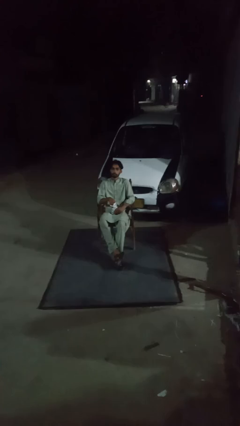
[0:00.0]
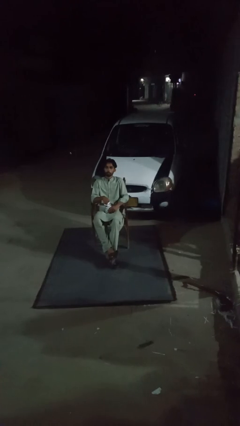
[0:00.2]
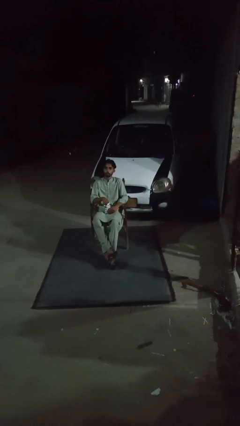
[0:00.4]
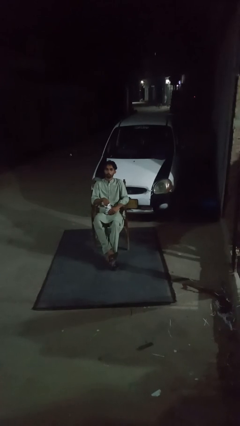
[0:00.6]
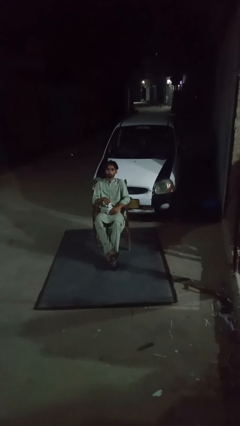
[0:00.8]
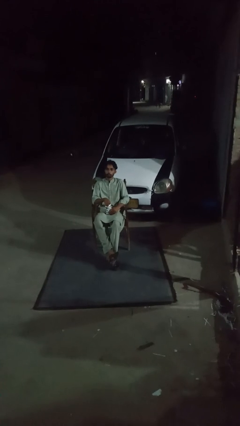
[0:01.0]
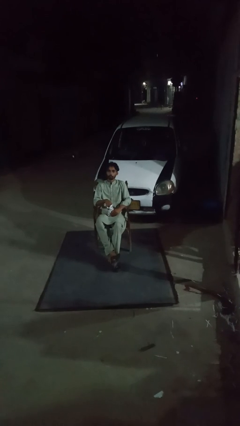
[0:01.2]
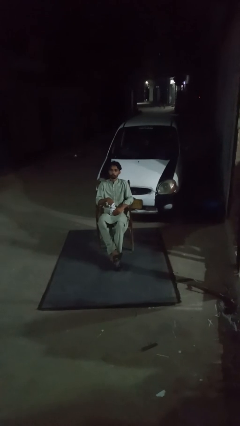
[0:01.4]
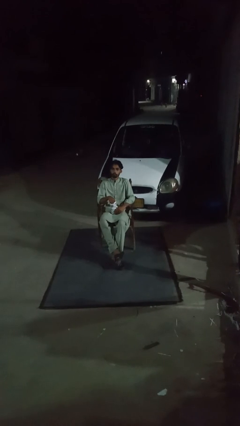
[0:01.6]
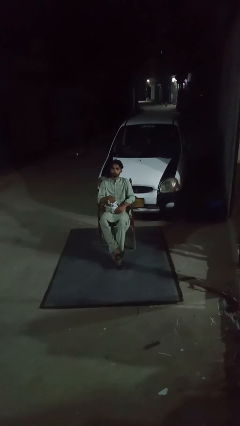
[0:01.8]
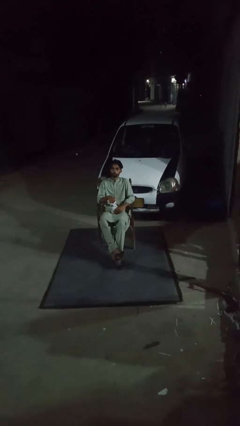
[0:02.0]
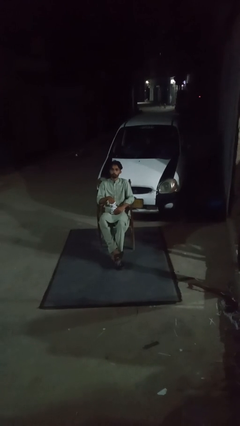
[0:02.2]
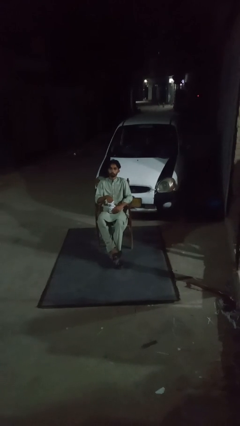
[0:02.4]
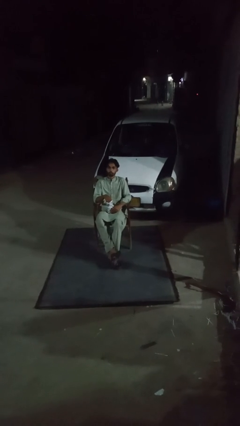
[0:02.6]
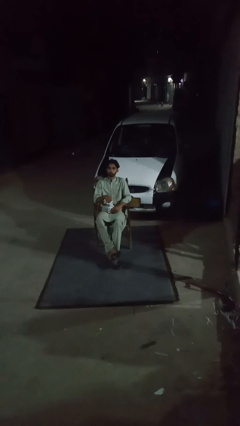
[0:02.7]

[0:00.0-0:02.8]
person eats snack from bag

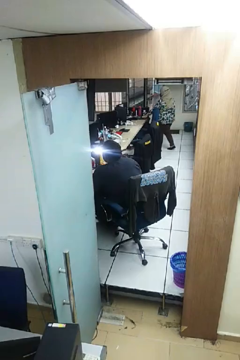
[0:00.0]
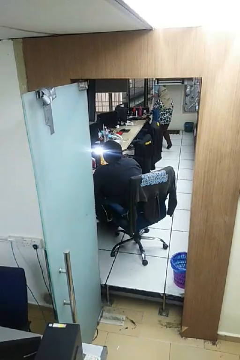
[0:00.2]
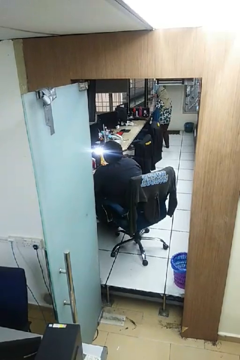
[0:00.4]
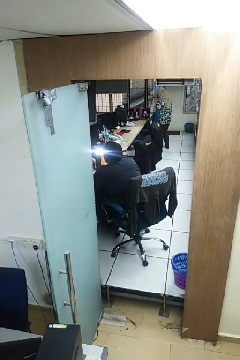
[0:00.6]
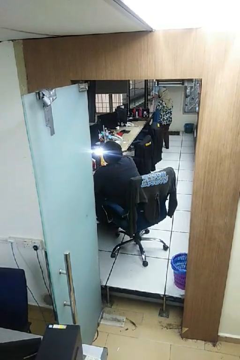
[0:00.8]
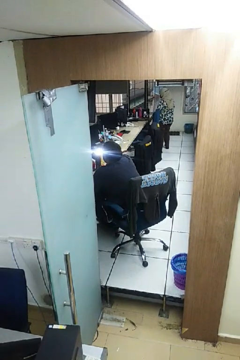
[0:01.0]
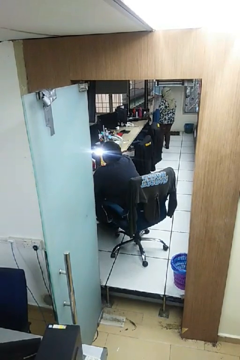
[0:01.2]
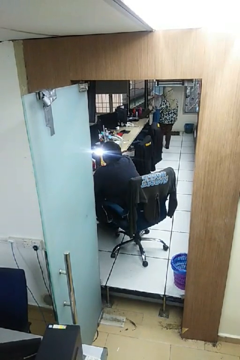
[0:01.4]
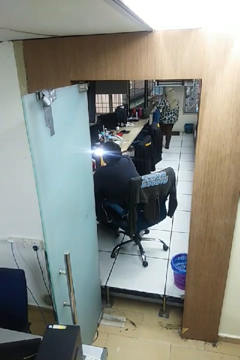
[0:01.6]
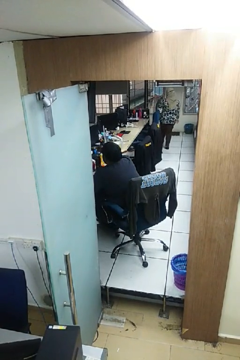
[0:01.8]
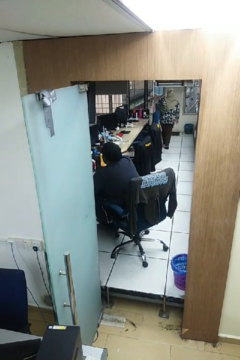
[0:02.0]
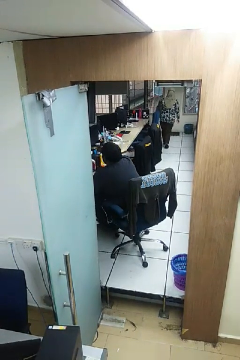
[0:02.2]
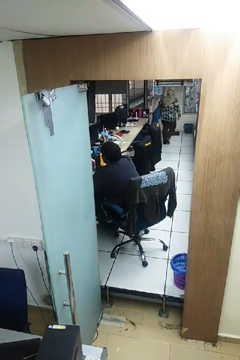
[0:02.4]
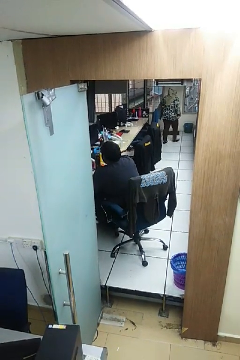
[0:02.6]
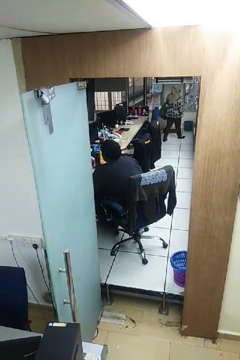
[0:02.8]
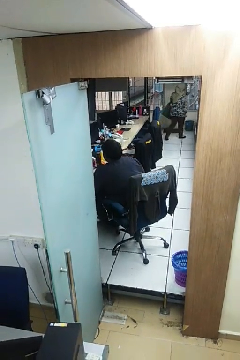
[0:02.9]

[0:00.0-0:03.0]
person turns off lamp

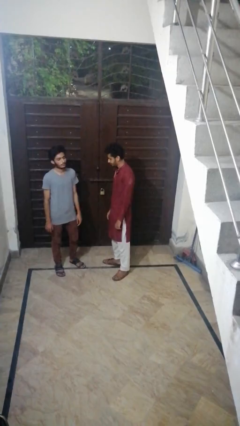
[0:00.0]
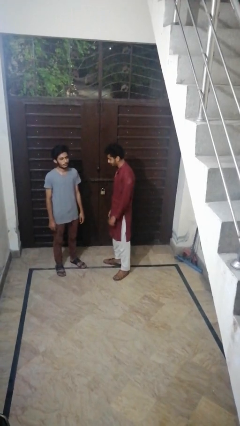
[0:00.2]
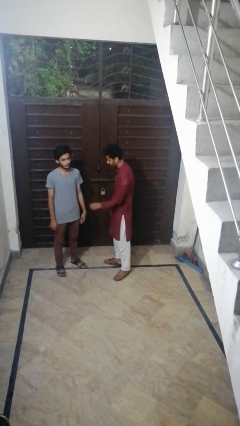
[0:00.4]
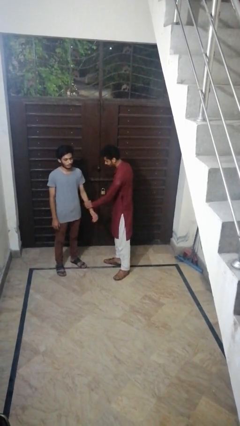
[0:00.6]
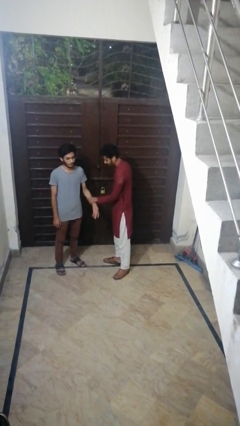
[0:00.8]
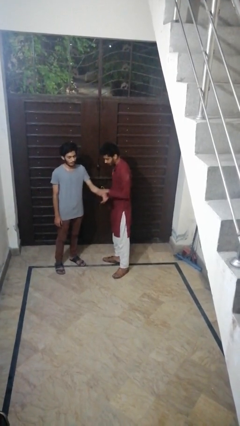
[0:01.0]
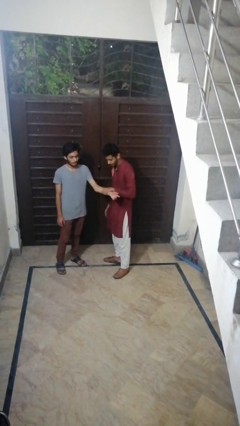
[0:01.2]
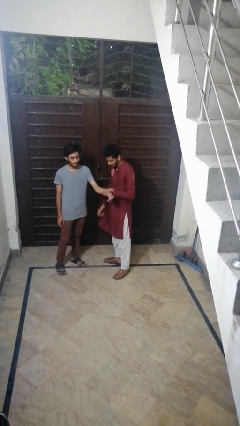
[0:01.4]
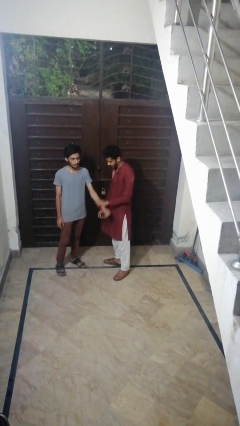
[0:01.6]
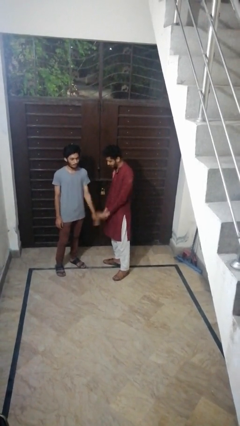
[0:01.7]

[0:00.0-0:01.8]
person grabs person by forearm

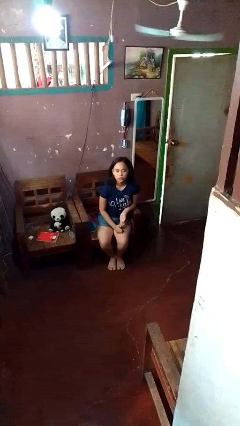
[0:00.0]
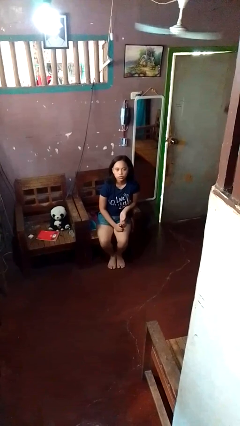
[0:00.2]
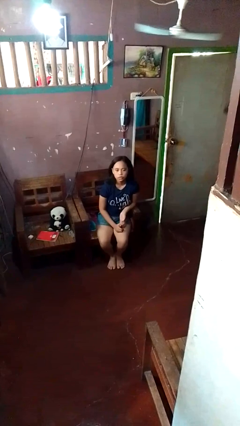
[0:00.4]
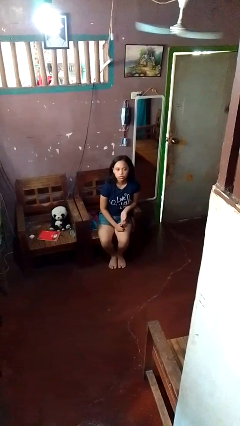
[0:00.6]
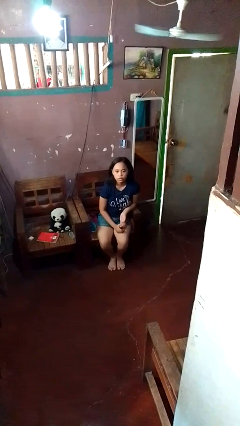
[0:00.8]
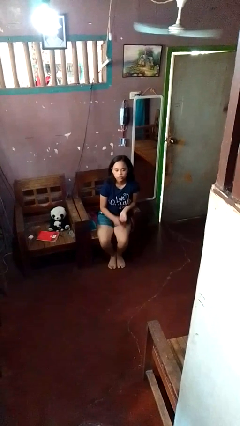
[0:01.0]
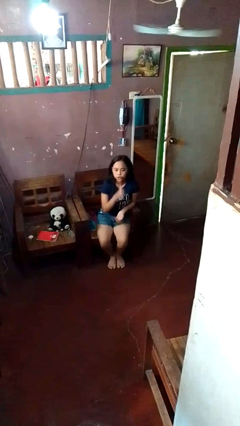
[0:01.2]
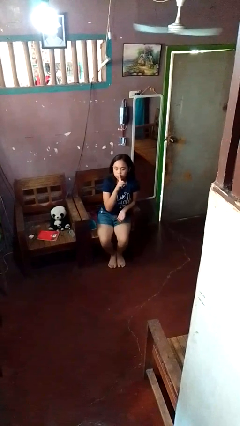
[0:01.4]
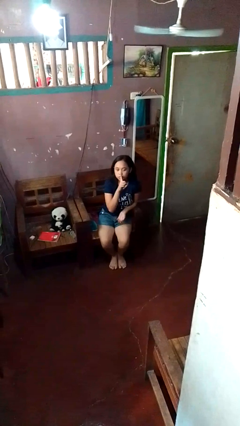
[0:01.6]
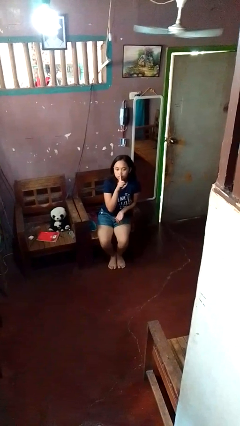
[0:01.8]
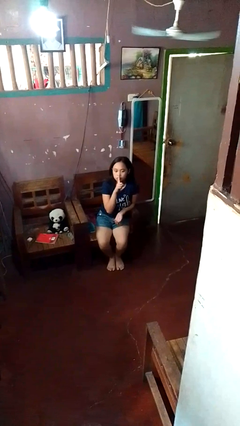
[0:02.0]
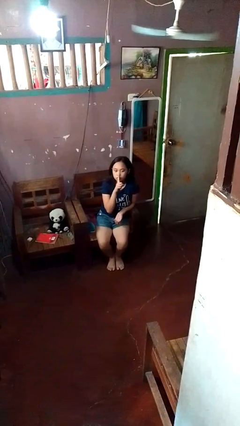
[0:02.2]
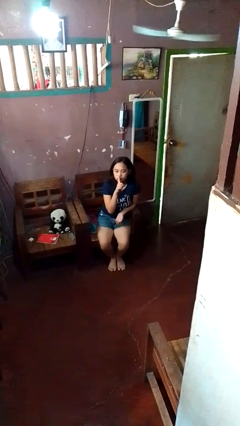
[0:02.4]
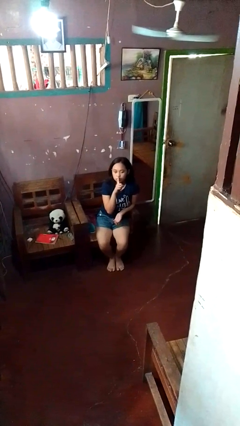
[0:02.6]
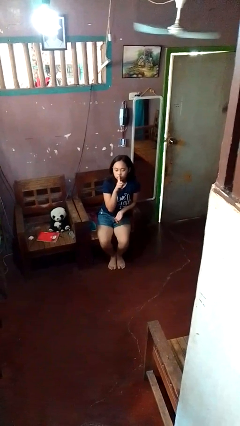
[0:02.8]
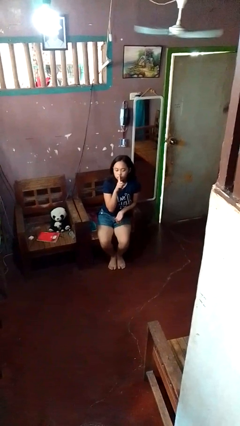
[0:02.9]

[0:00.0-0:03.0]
person gestures be quiet

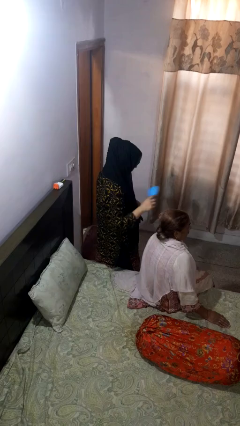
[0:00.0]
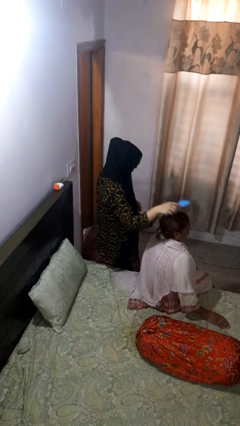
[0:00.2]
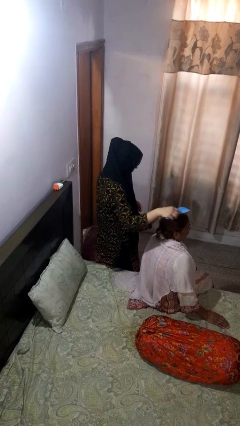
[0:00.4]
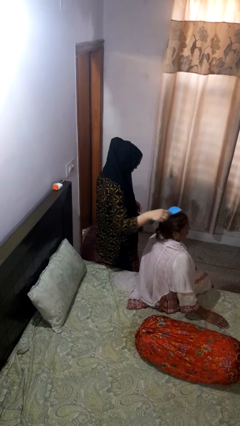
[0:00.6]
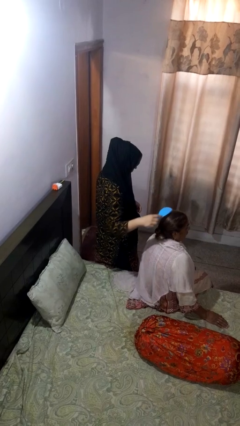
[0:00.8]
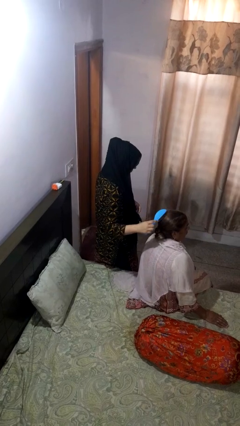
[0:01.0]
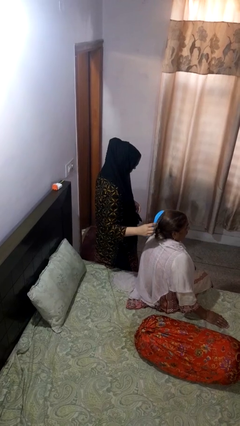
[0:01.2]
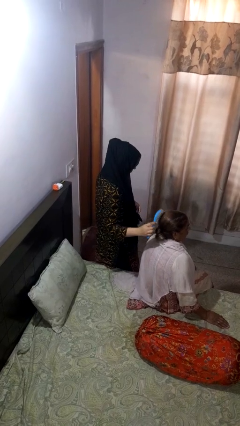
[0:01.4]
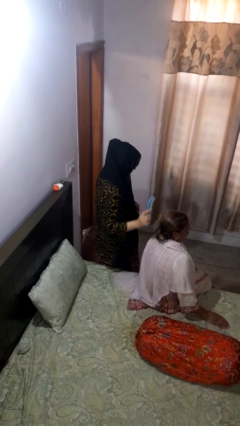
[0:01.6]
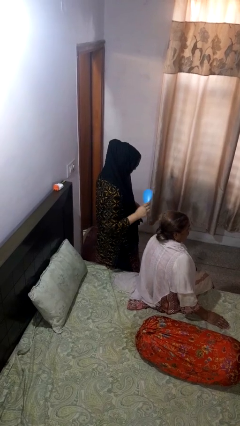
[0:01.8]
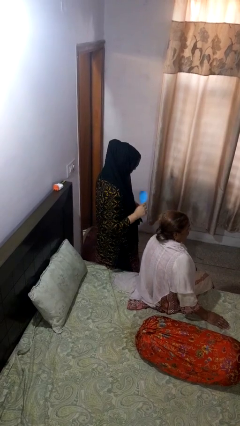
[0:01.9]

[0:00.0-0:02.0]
person brushes hair of person

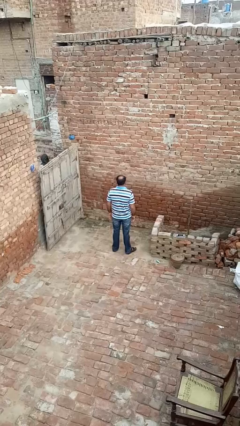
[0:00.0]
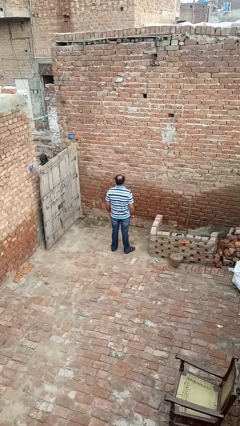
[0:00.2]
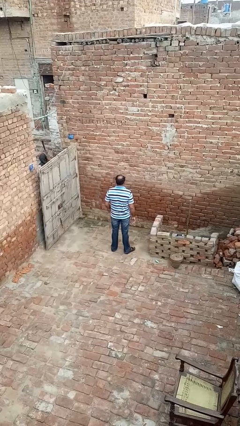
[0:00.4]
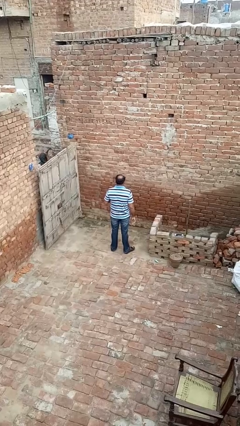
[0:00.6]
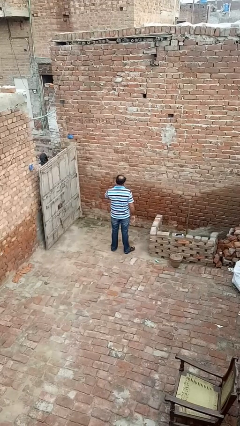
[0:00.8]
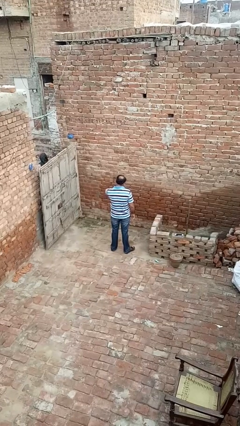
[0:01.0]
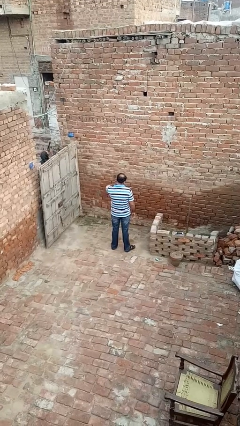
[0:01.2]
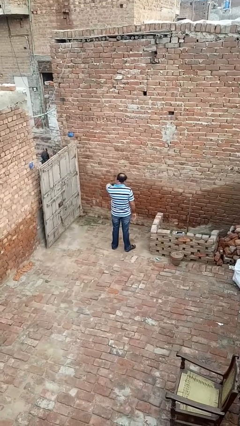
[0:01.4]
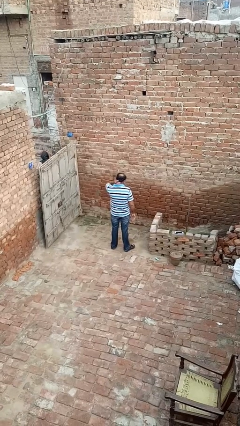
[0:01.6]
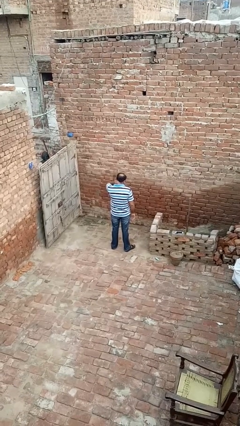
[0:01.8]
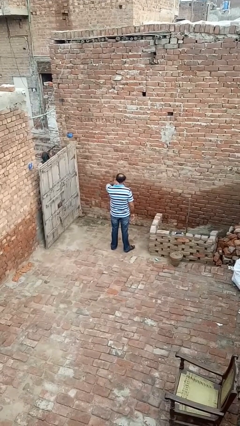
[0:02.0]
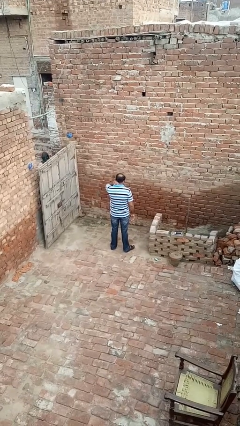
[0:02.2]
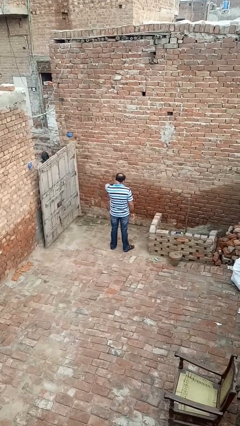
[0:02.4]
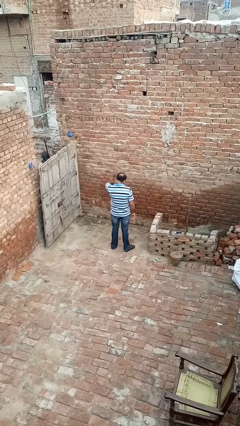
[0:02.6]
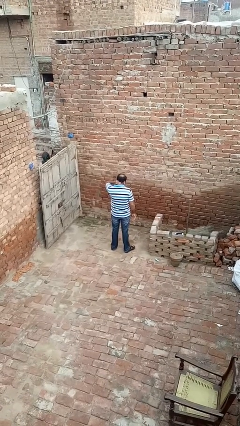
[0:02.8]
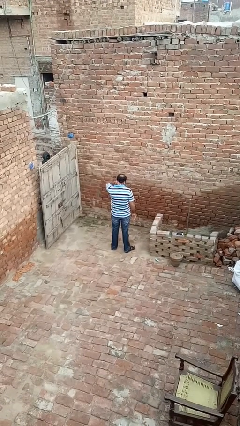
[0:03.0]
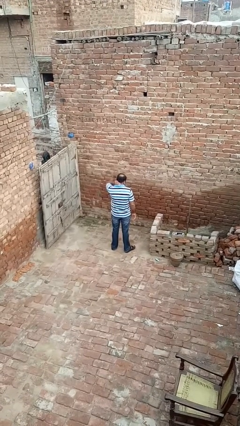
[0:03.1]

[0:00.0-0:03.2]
person rubs neck

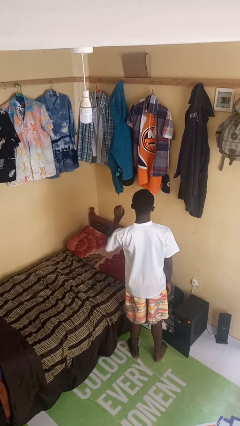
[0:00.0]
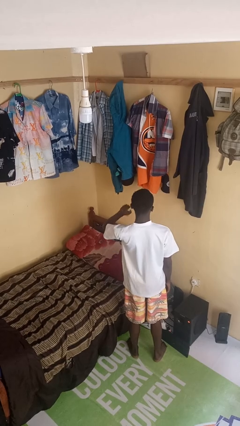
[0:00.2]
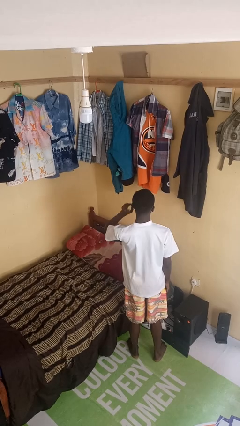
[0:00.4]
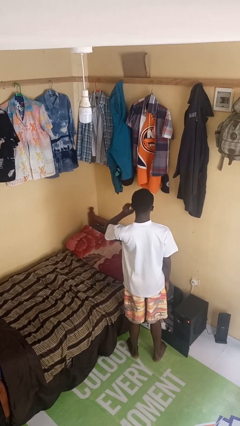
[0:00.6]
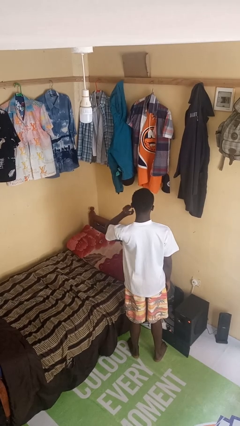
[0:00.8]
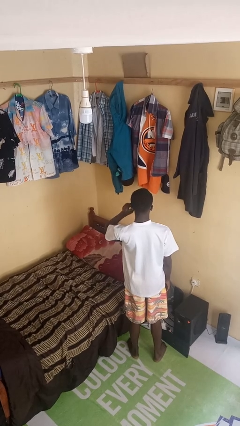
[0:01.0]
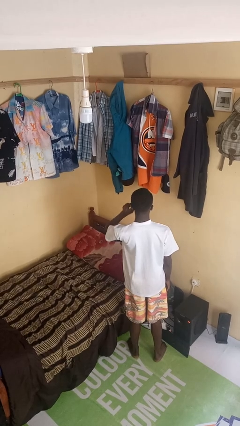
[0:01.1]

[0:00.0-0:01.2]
person gestures listen closely

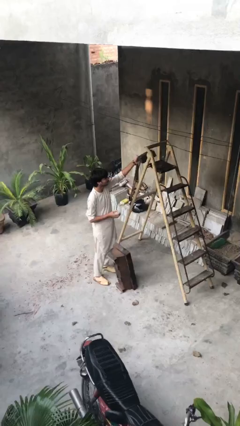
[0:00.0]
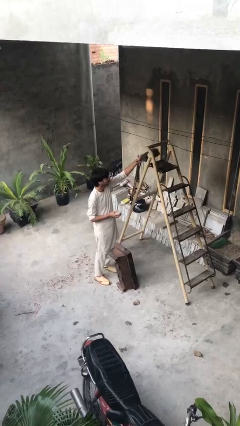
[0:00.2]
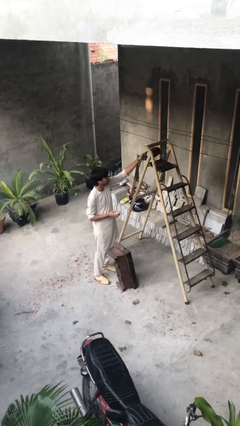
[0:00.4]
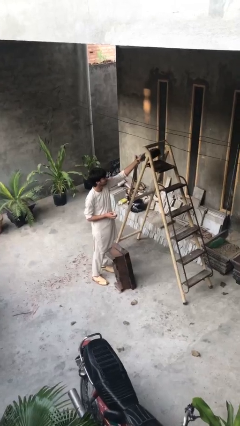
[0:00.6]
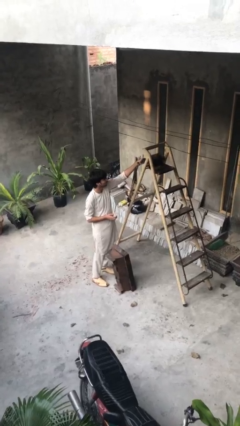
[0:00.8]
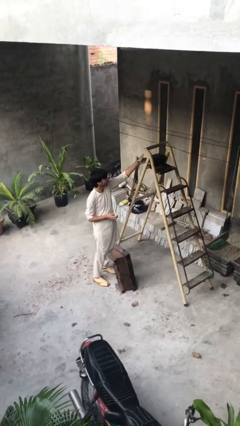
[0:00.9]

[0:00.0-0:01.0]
person puts down object on shelf
